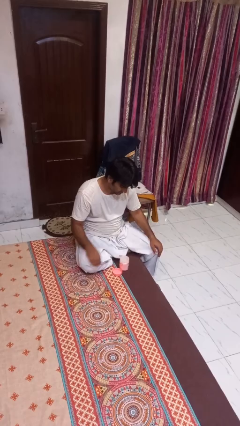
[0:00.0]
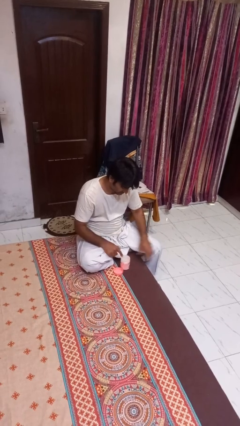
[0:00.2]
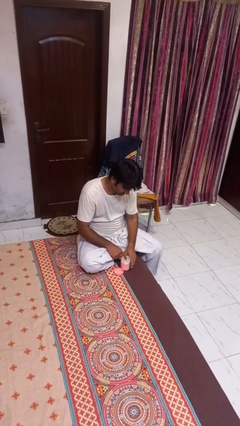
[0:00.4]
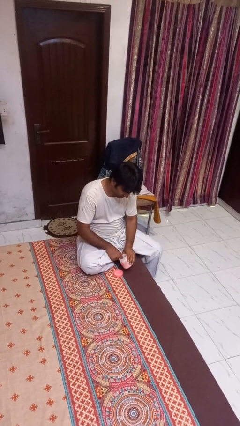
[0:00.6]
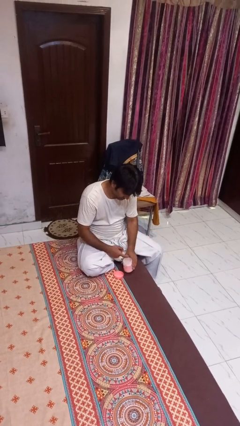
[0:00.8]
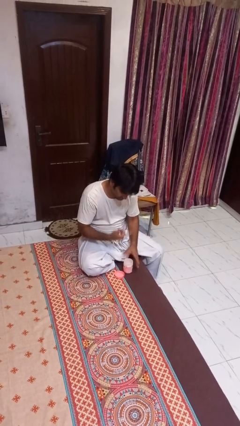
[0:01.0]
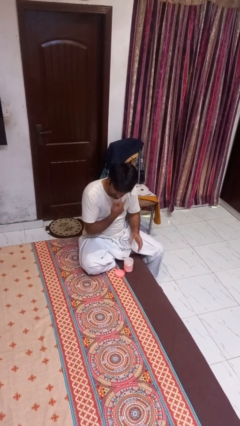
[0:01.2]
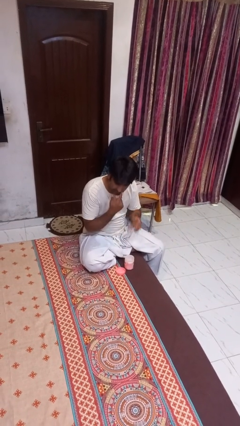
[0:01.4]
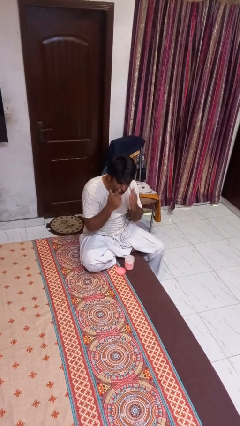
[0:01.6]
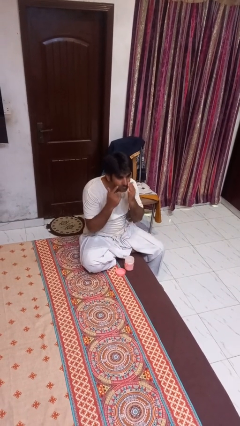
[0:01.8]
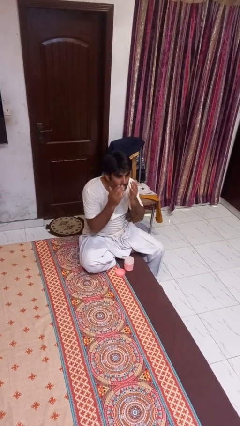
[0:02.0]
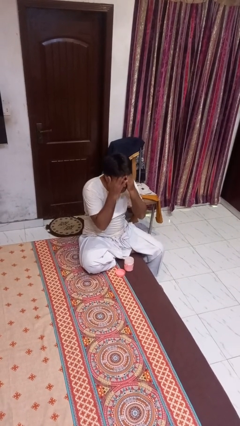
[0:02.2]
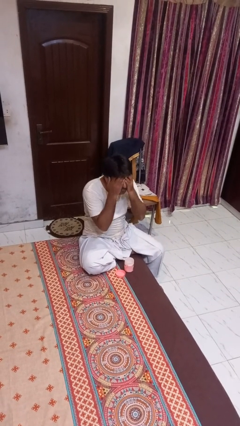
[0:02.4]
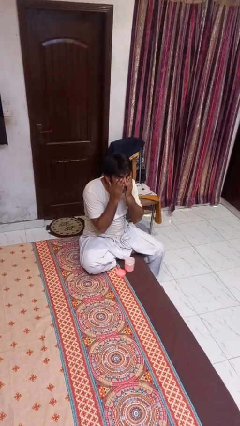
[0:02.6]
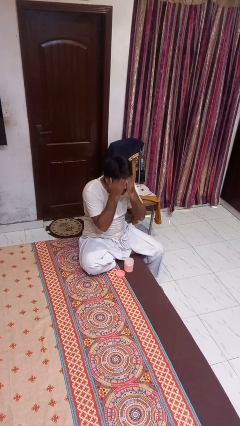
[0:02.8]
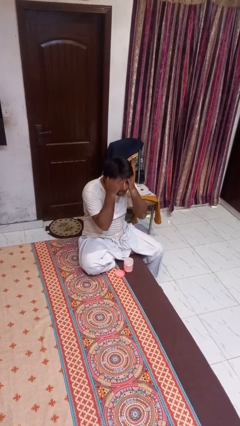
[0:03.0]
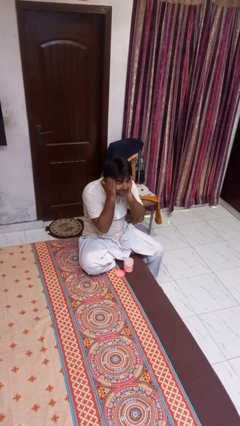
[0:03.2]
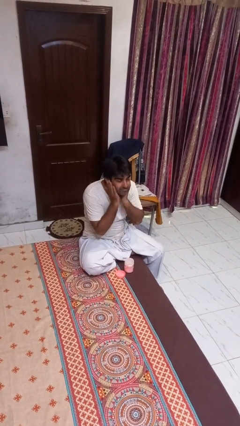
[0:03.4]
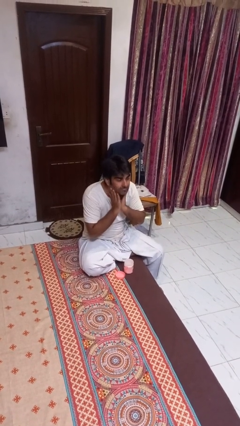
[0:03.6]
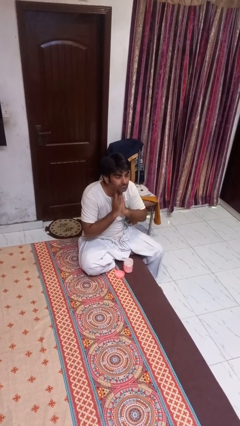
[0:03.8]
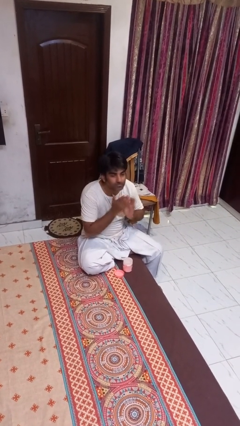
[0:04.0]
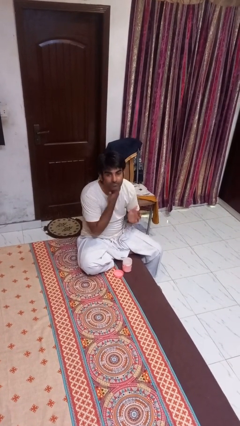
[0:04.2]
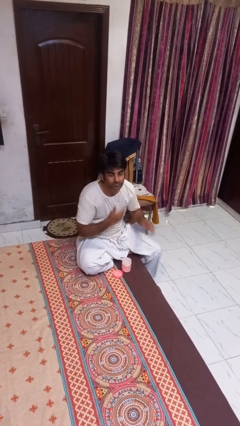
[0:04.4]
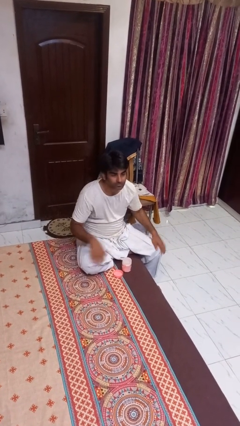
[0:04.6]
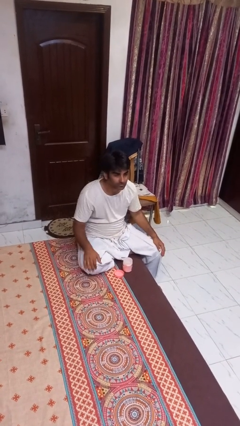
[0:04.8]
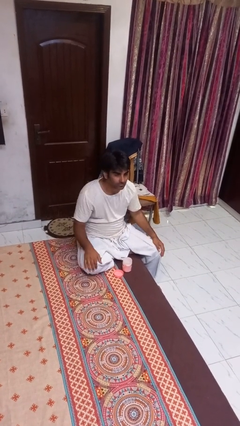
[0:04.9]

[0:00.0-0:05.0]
person applies facial moisturizer

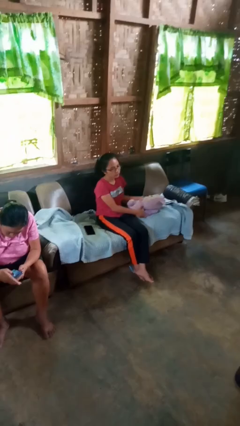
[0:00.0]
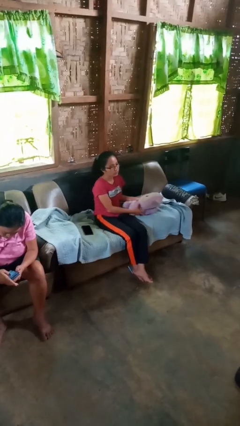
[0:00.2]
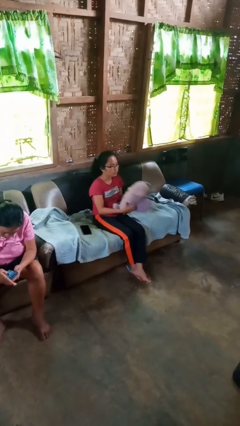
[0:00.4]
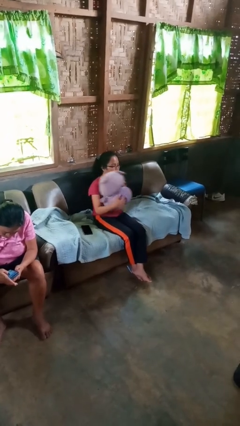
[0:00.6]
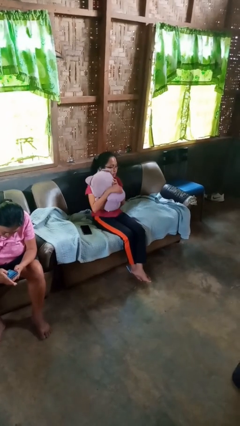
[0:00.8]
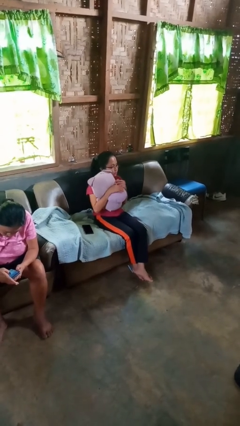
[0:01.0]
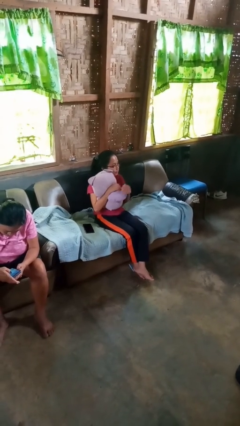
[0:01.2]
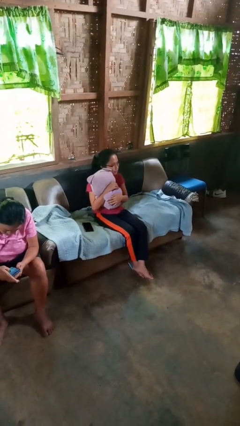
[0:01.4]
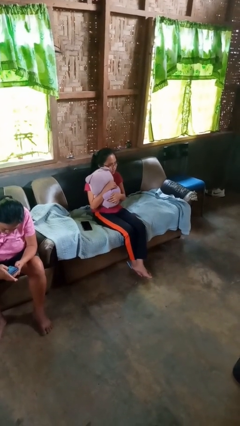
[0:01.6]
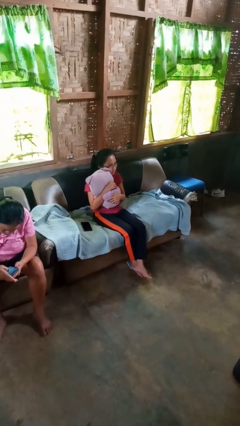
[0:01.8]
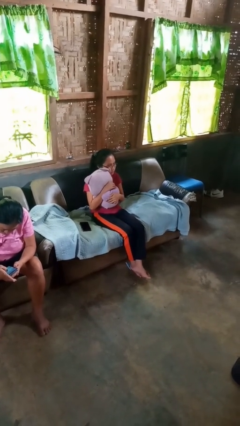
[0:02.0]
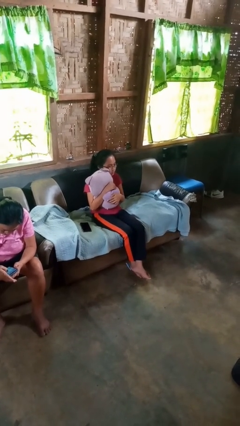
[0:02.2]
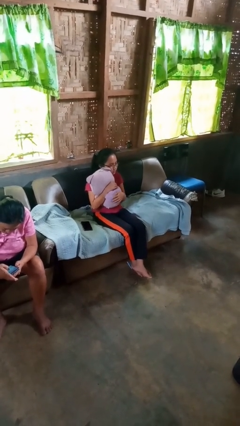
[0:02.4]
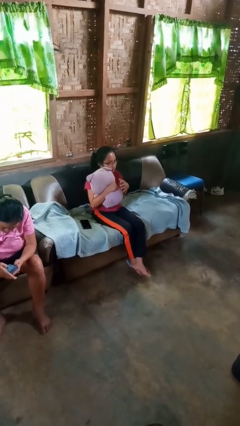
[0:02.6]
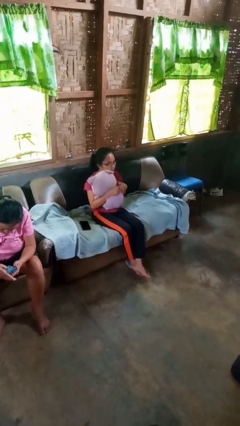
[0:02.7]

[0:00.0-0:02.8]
person hugs stuffed animal

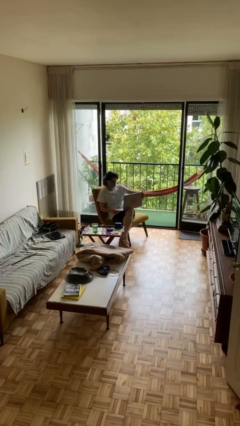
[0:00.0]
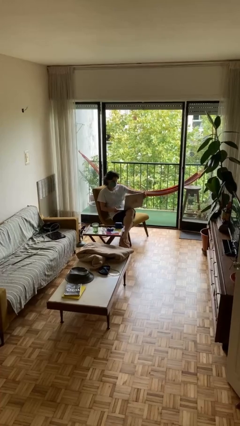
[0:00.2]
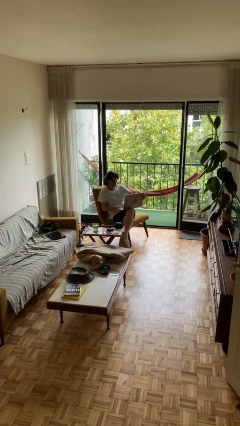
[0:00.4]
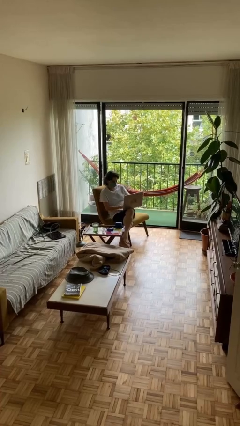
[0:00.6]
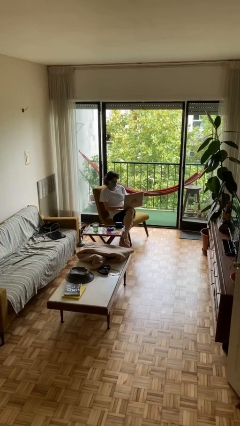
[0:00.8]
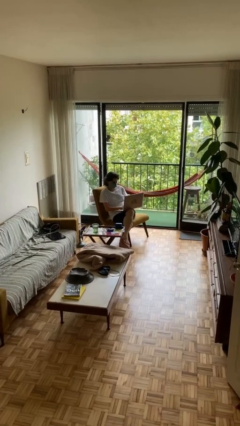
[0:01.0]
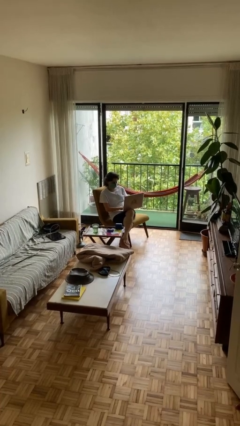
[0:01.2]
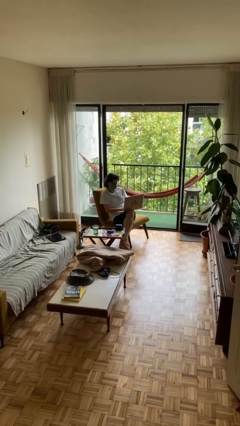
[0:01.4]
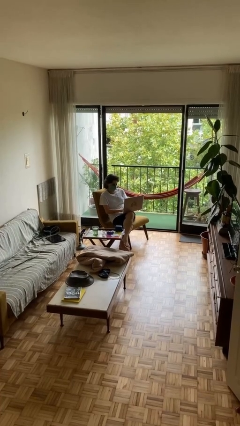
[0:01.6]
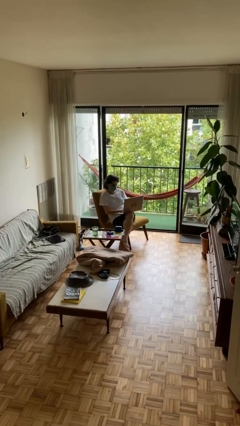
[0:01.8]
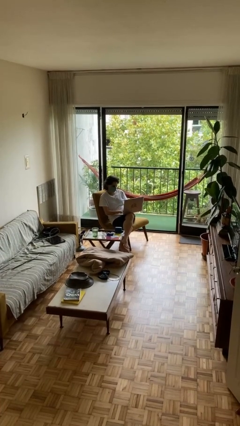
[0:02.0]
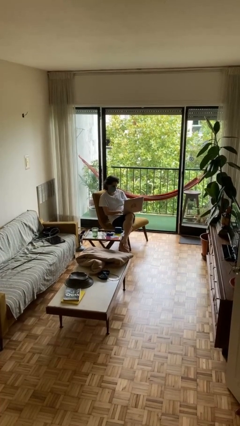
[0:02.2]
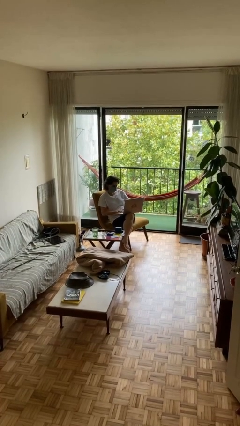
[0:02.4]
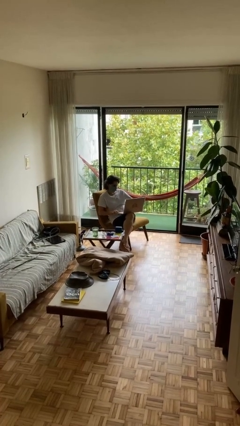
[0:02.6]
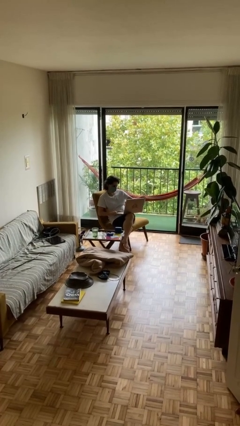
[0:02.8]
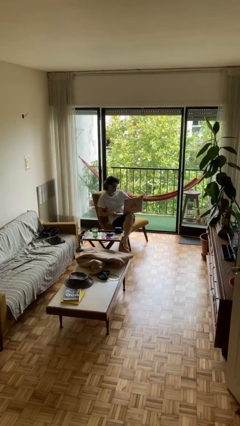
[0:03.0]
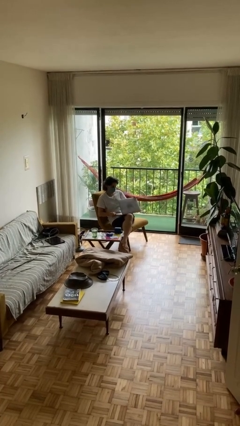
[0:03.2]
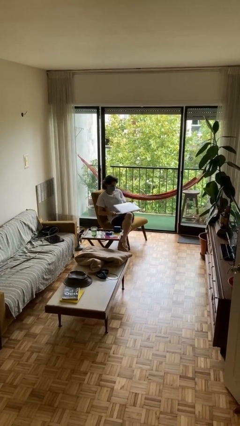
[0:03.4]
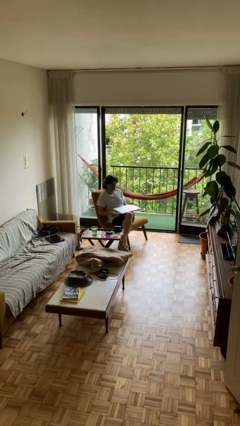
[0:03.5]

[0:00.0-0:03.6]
person interacts with laptop

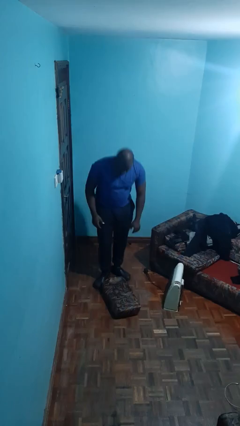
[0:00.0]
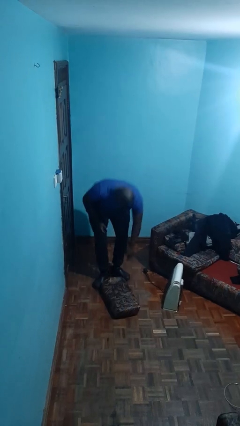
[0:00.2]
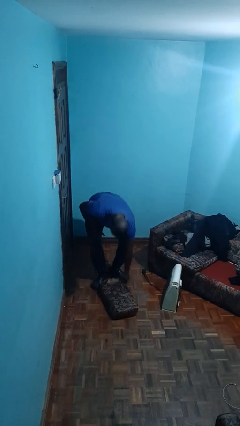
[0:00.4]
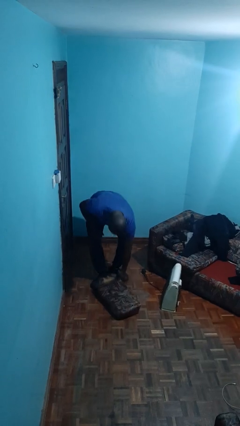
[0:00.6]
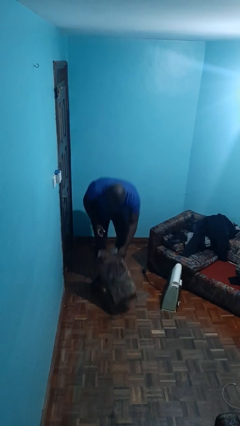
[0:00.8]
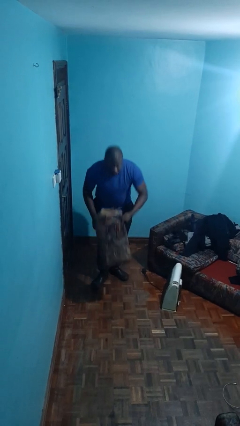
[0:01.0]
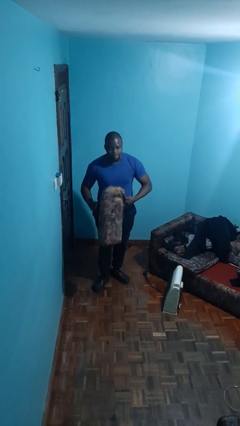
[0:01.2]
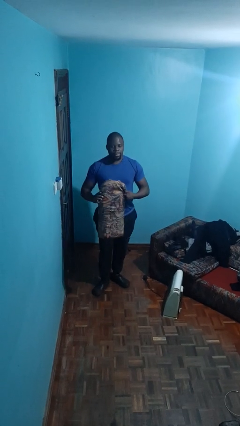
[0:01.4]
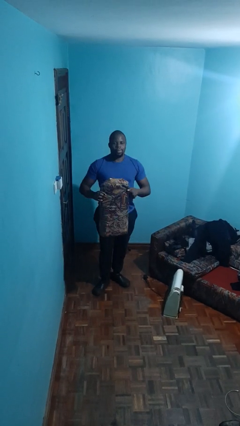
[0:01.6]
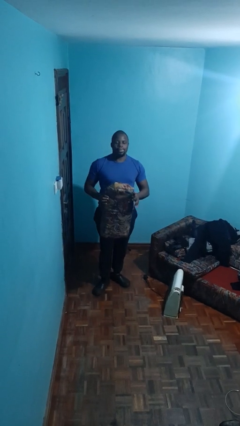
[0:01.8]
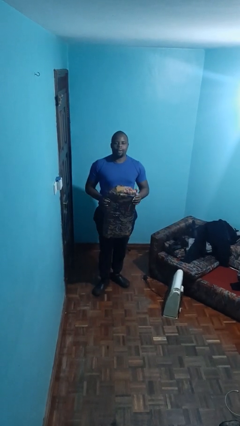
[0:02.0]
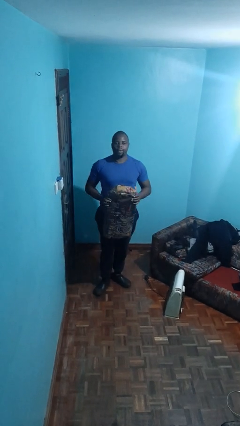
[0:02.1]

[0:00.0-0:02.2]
person picks up object from floor

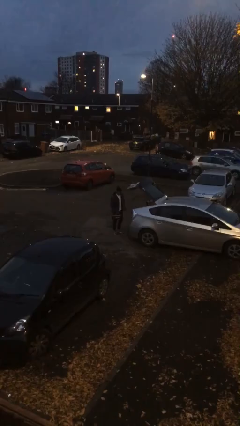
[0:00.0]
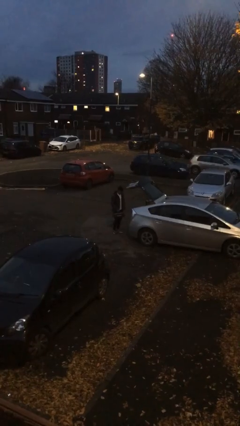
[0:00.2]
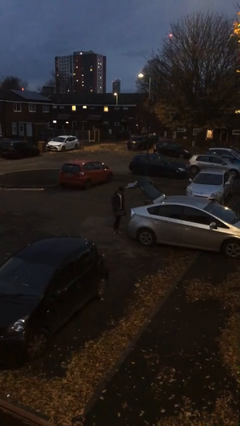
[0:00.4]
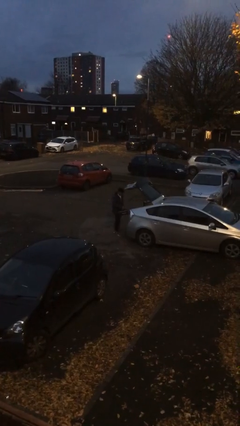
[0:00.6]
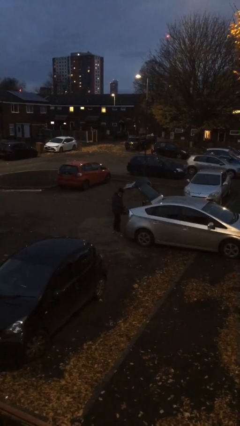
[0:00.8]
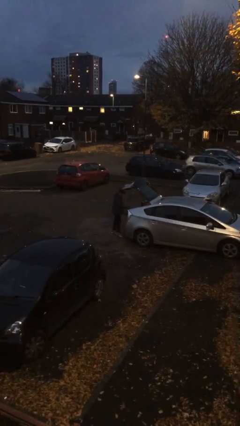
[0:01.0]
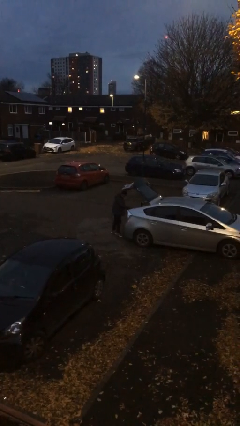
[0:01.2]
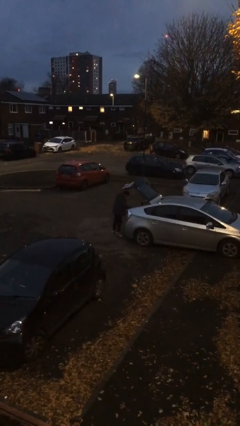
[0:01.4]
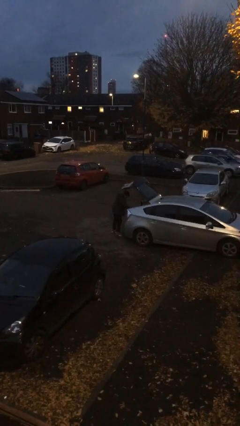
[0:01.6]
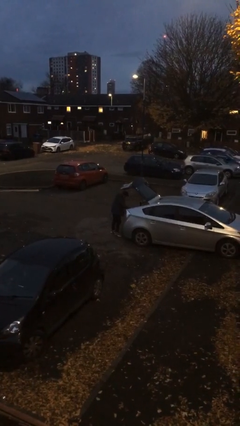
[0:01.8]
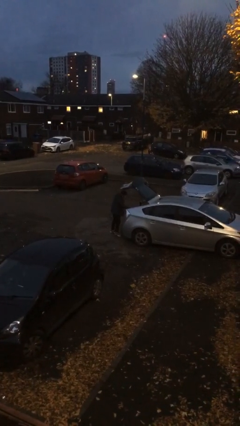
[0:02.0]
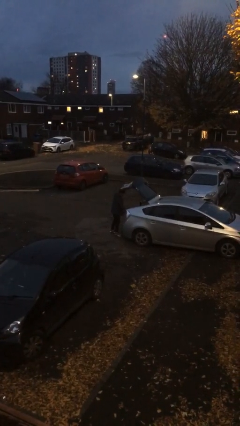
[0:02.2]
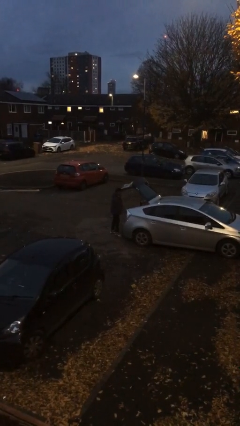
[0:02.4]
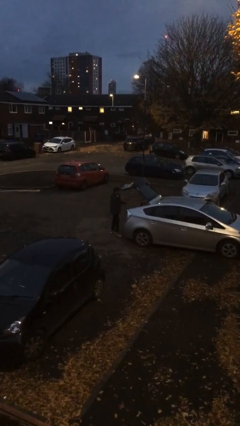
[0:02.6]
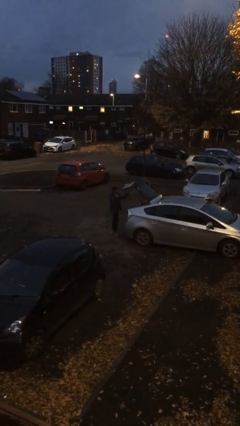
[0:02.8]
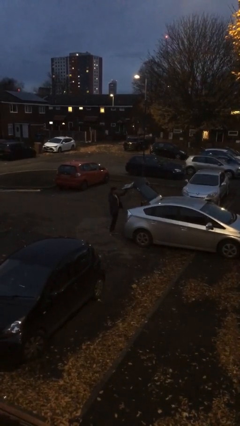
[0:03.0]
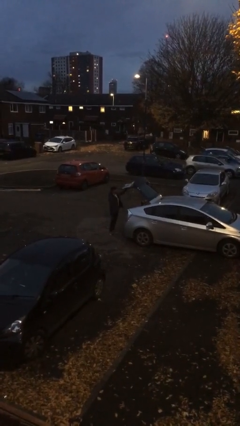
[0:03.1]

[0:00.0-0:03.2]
person loads car

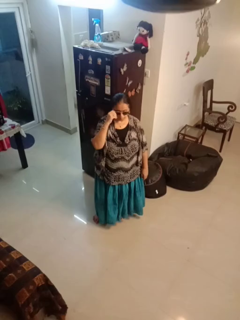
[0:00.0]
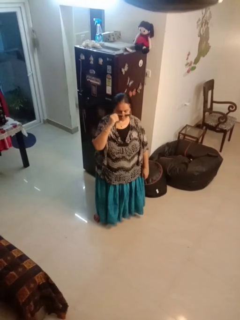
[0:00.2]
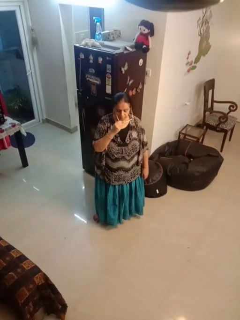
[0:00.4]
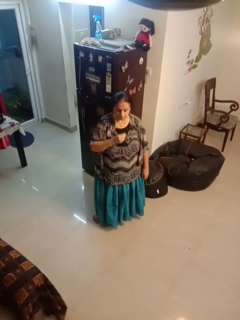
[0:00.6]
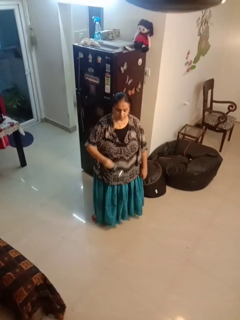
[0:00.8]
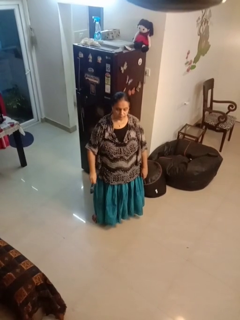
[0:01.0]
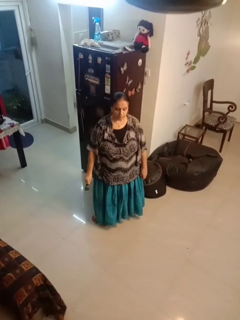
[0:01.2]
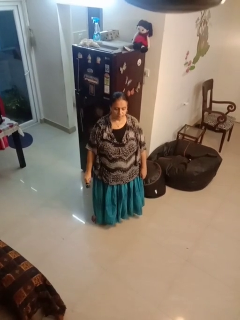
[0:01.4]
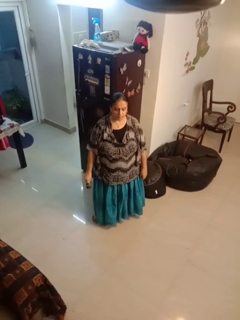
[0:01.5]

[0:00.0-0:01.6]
person takes off sunglasses
